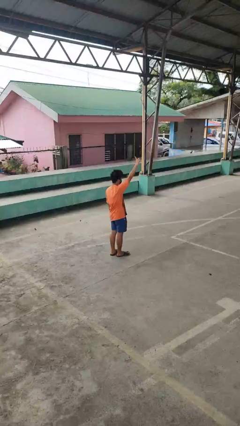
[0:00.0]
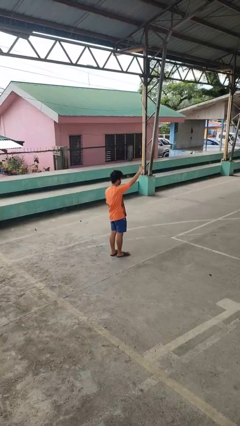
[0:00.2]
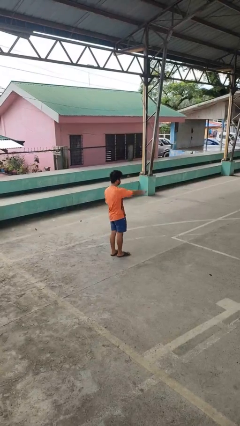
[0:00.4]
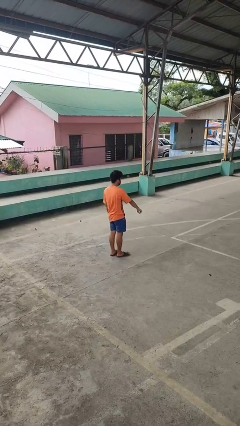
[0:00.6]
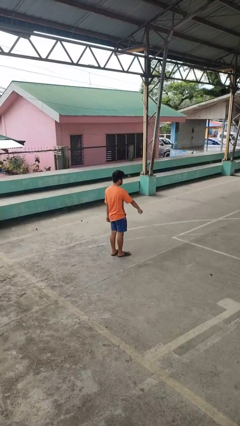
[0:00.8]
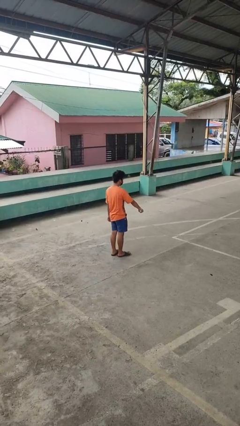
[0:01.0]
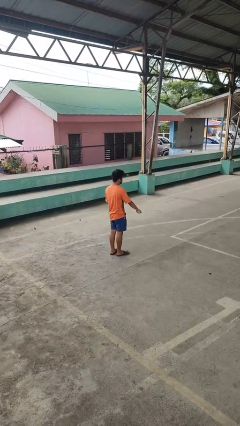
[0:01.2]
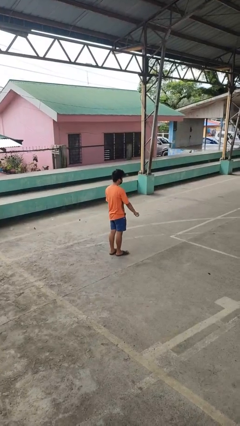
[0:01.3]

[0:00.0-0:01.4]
person gestures swipe down

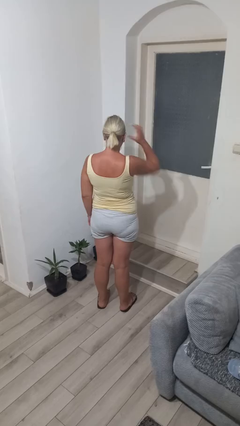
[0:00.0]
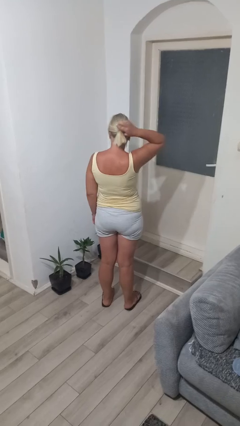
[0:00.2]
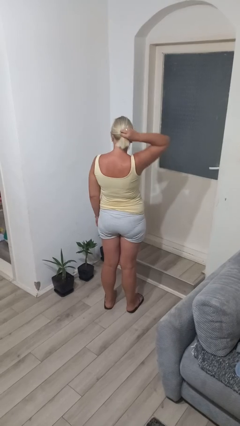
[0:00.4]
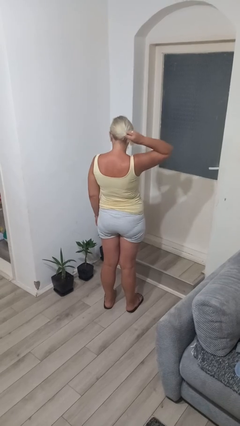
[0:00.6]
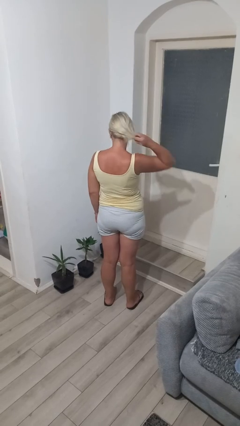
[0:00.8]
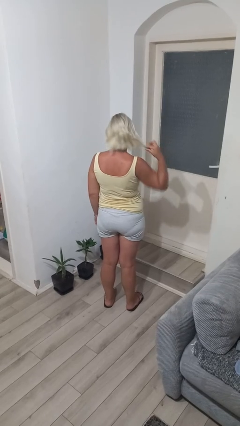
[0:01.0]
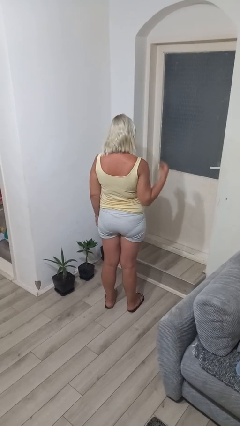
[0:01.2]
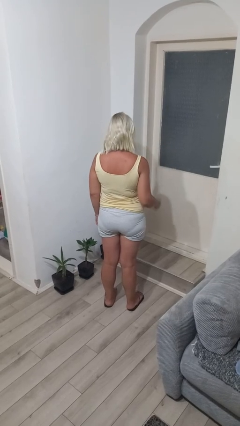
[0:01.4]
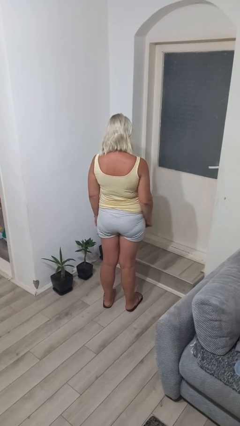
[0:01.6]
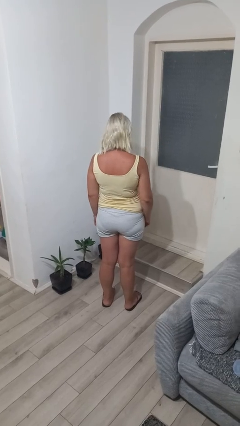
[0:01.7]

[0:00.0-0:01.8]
person takes off hairtie

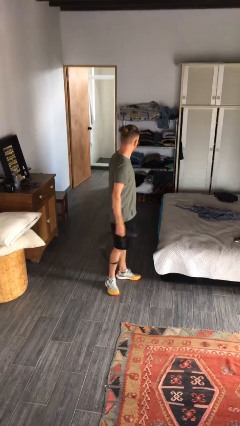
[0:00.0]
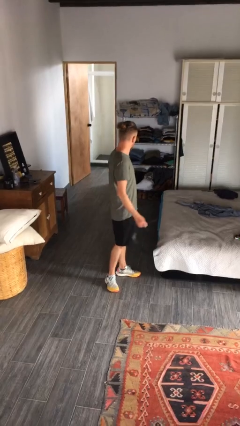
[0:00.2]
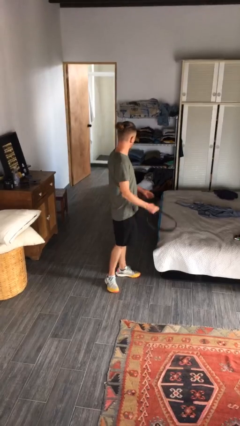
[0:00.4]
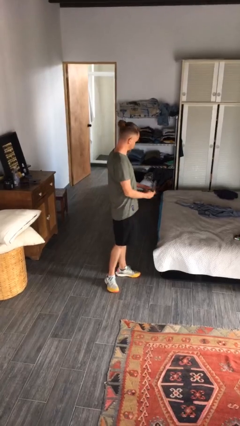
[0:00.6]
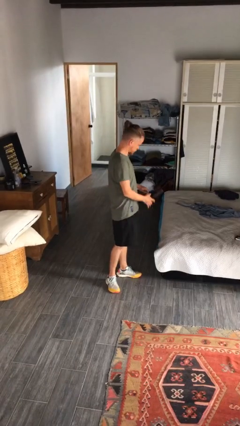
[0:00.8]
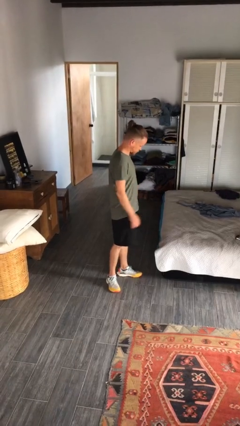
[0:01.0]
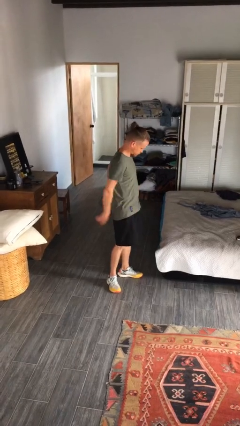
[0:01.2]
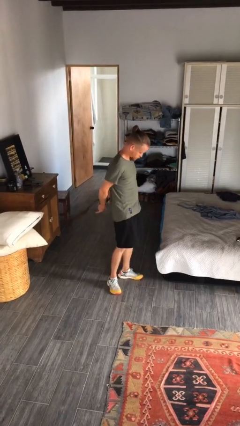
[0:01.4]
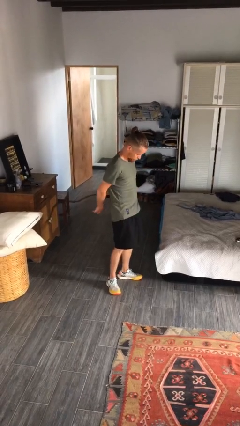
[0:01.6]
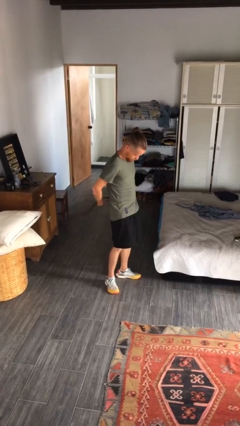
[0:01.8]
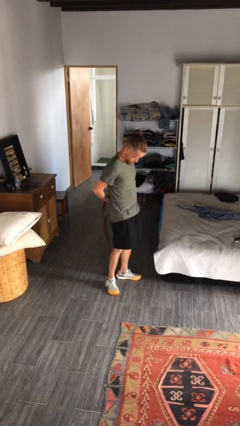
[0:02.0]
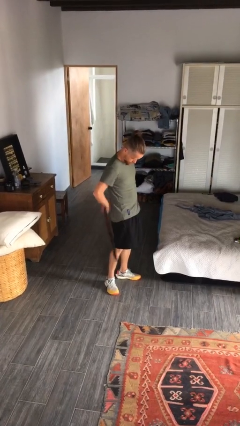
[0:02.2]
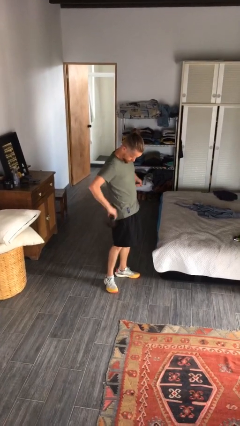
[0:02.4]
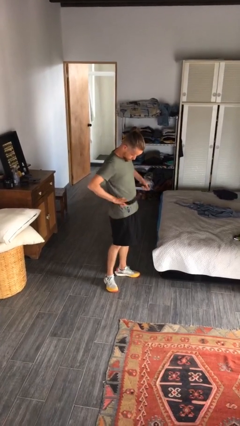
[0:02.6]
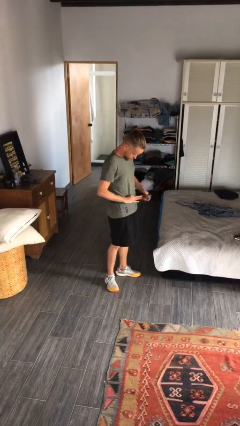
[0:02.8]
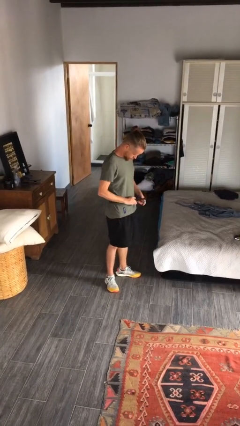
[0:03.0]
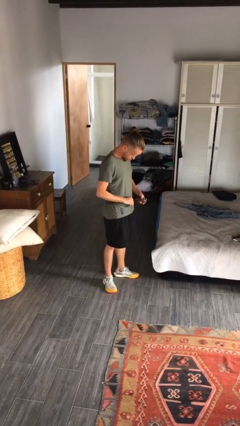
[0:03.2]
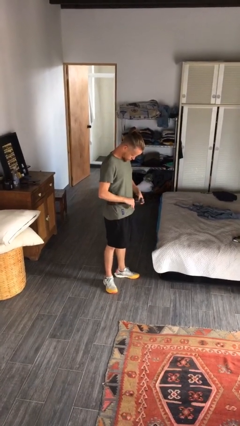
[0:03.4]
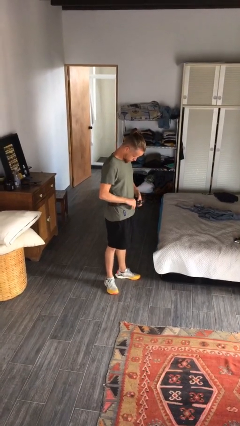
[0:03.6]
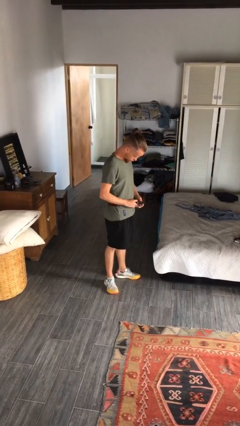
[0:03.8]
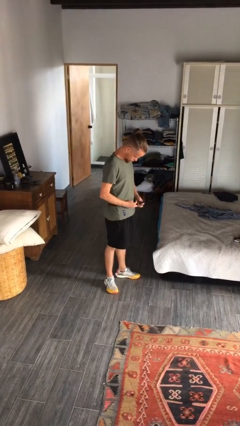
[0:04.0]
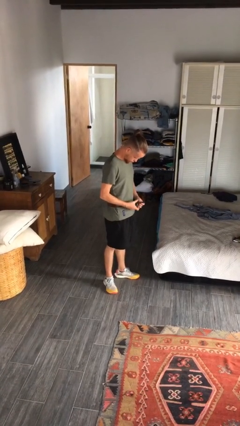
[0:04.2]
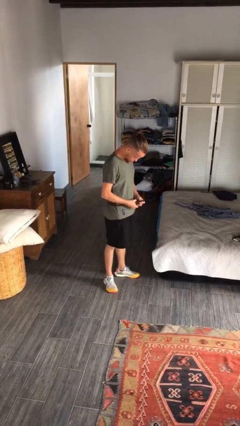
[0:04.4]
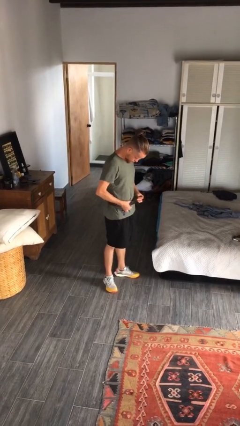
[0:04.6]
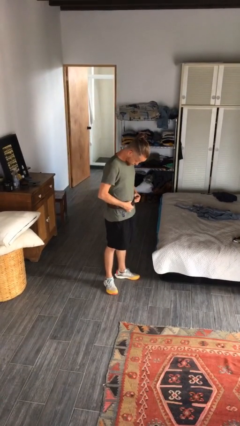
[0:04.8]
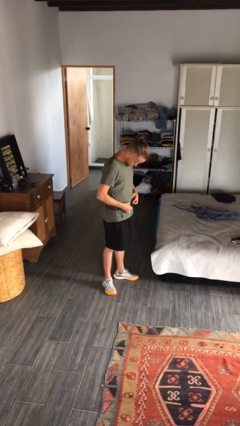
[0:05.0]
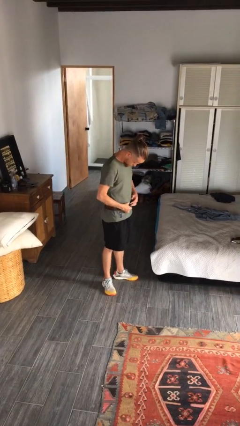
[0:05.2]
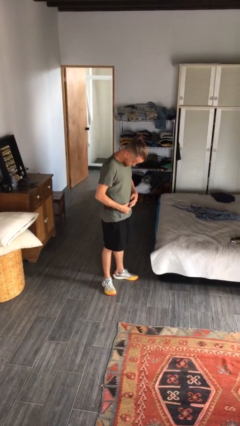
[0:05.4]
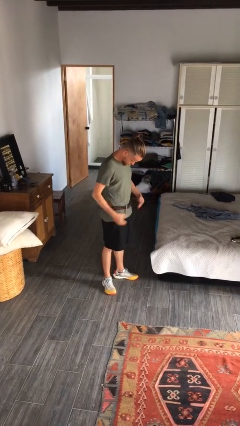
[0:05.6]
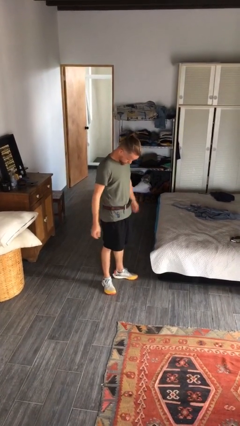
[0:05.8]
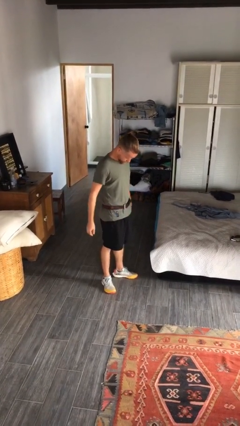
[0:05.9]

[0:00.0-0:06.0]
person puts on belt

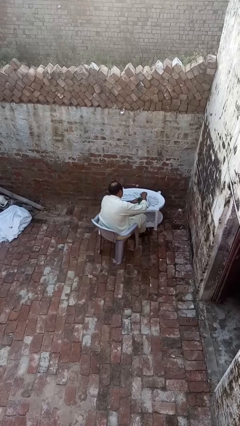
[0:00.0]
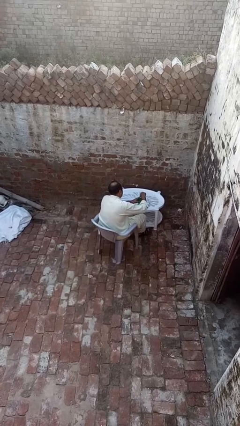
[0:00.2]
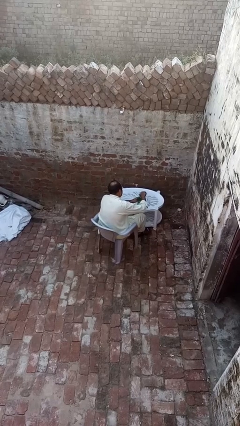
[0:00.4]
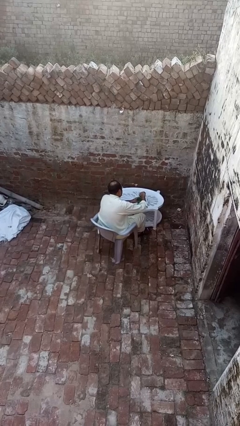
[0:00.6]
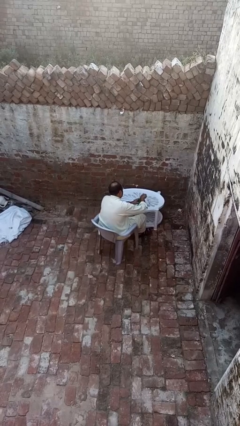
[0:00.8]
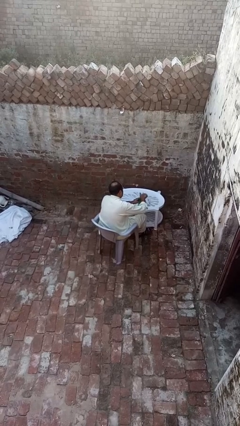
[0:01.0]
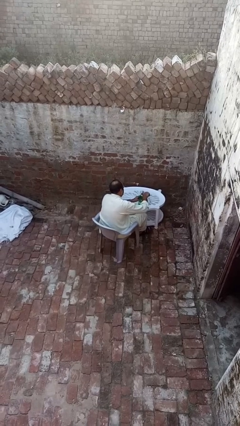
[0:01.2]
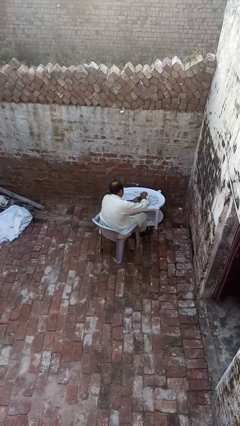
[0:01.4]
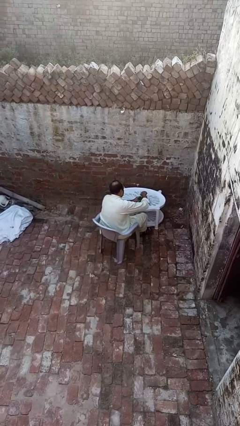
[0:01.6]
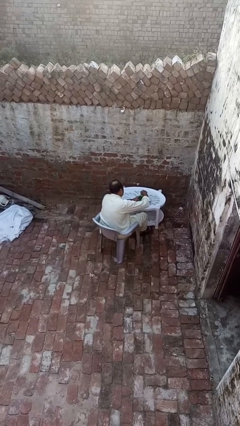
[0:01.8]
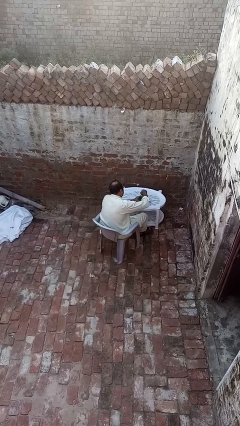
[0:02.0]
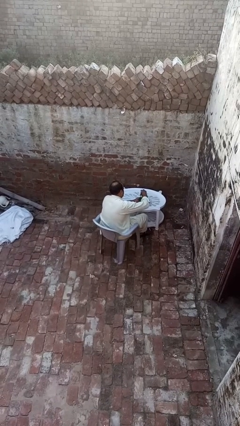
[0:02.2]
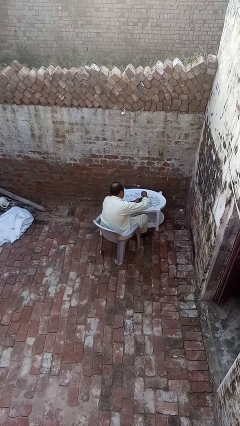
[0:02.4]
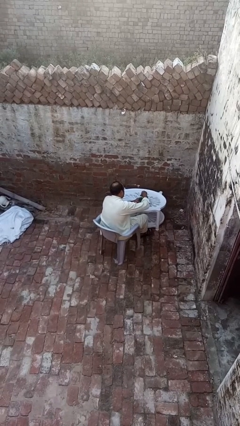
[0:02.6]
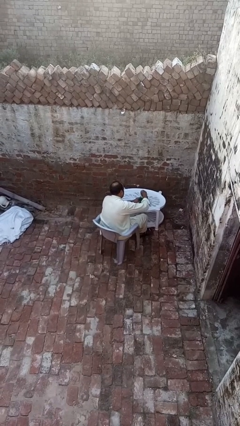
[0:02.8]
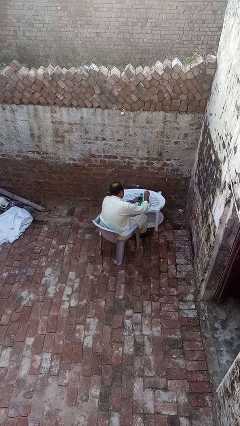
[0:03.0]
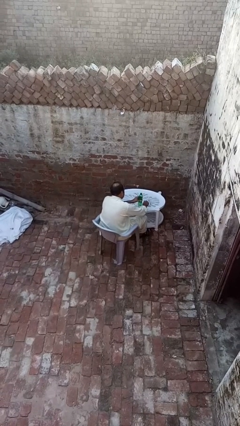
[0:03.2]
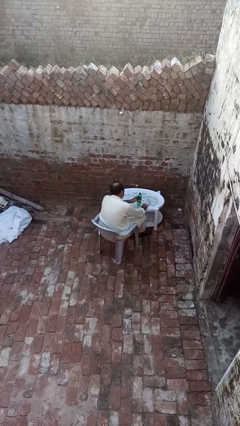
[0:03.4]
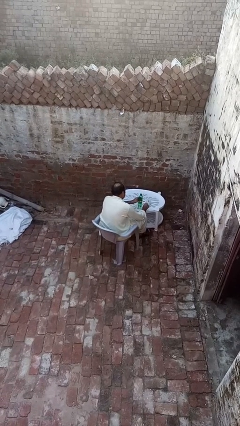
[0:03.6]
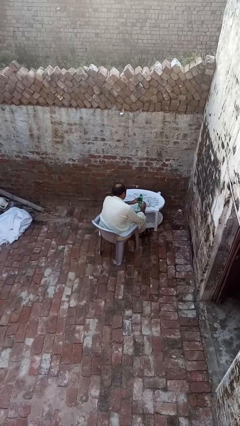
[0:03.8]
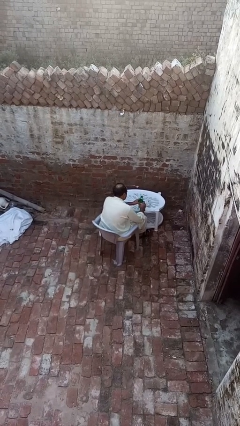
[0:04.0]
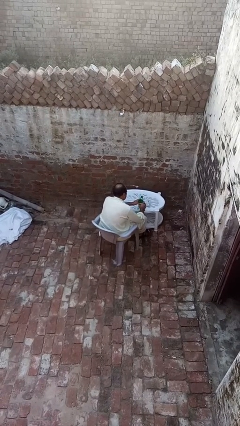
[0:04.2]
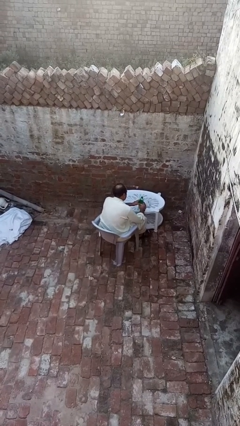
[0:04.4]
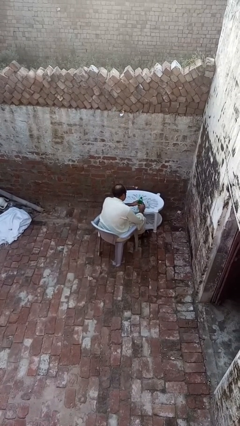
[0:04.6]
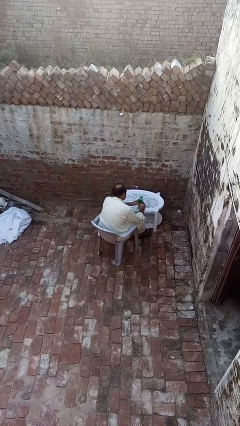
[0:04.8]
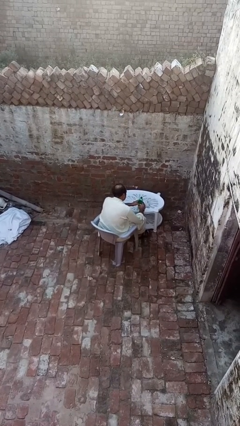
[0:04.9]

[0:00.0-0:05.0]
person unscrews lid from bottle

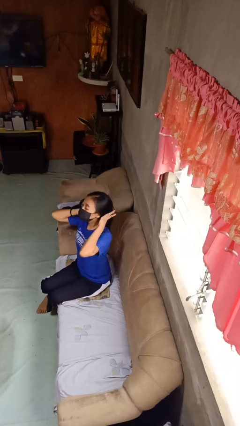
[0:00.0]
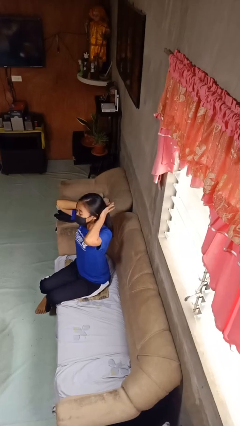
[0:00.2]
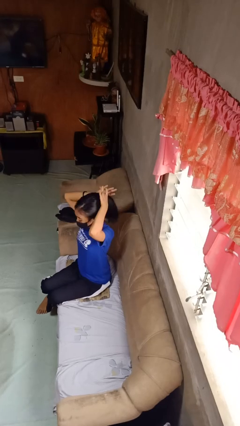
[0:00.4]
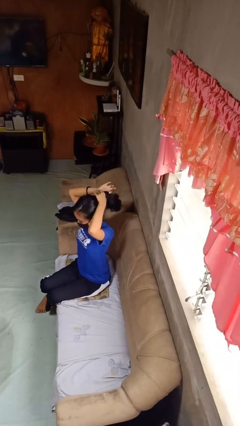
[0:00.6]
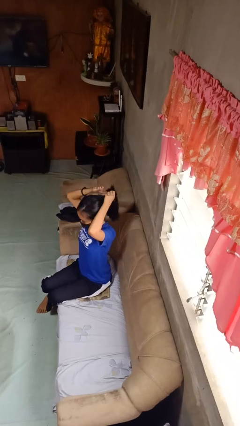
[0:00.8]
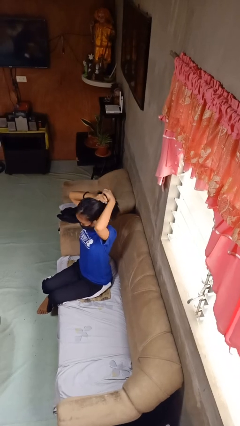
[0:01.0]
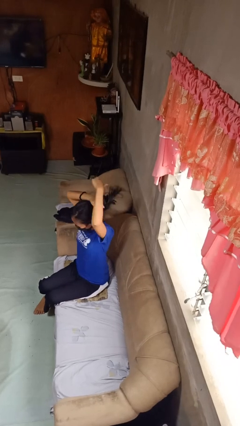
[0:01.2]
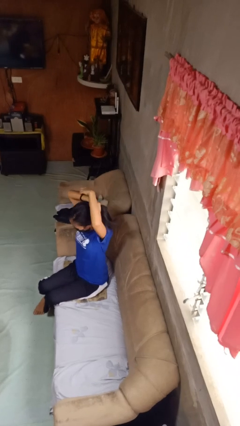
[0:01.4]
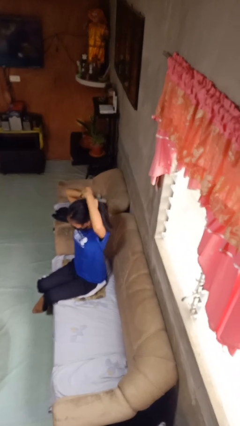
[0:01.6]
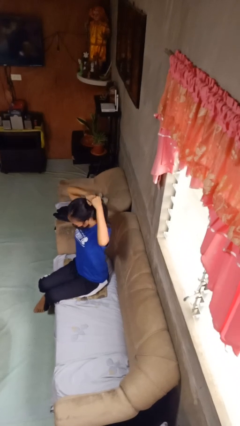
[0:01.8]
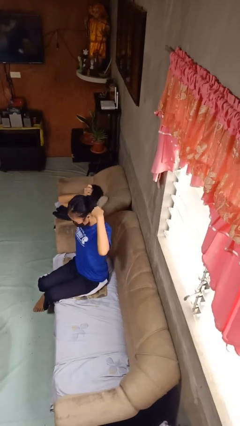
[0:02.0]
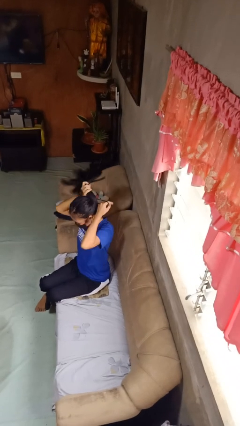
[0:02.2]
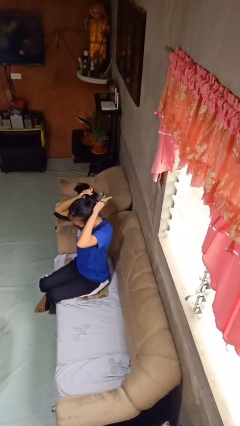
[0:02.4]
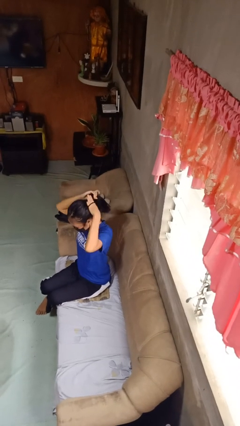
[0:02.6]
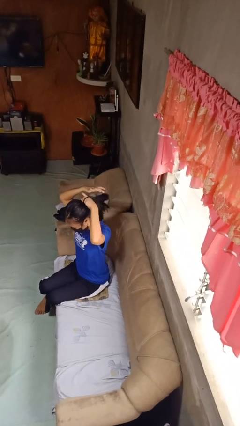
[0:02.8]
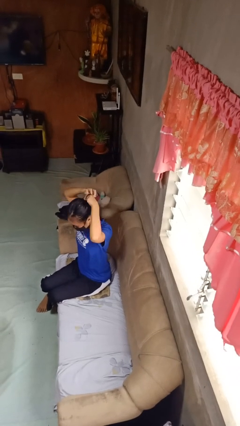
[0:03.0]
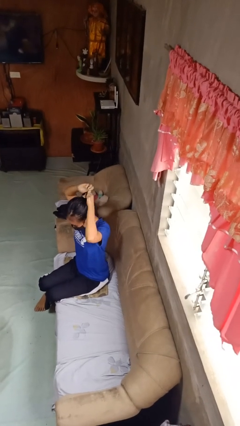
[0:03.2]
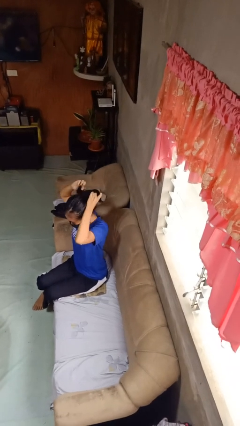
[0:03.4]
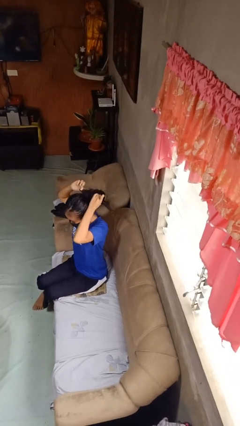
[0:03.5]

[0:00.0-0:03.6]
person puts hair in ponytail
